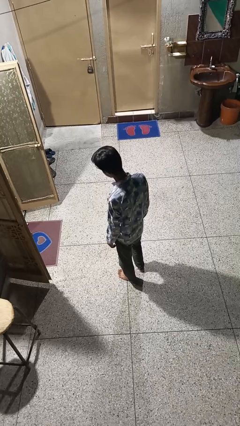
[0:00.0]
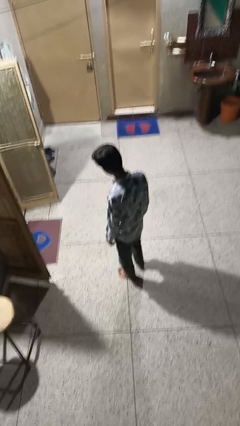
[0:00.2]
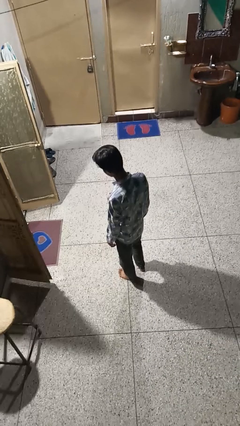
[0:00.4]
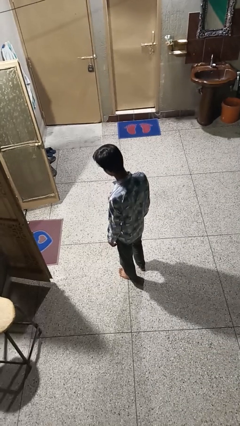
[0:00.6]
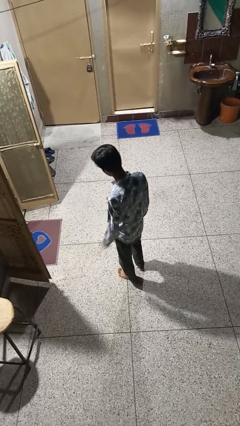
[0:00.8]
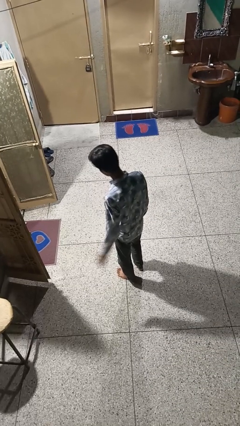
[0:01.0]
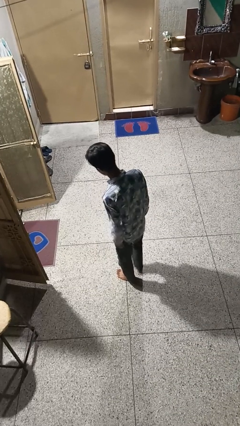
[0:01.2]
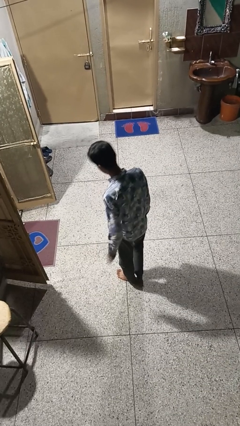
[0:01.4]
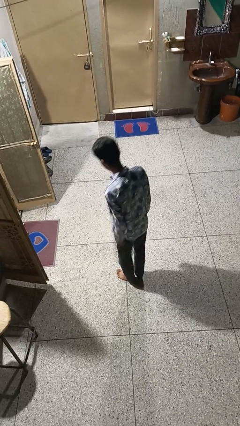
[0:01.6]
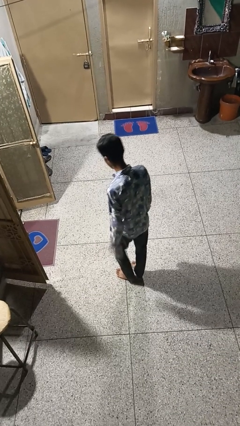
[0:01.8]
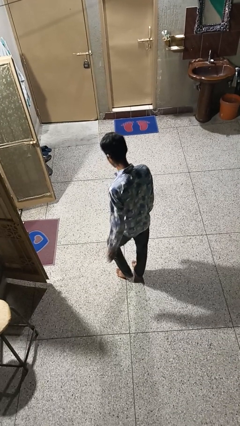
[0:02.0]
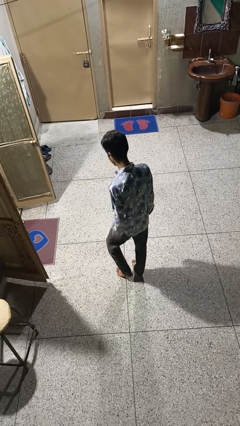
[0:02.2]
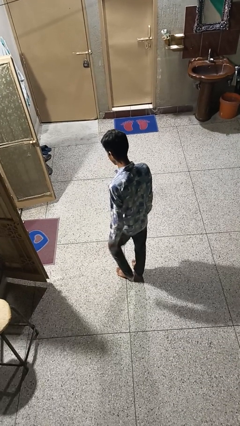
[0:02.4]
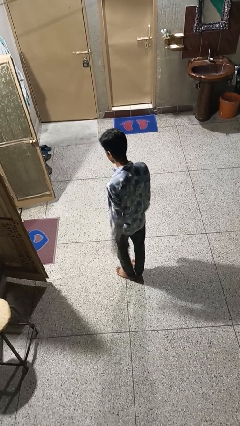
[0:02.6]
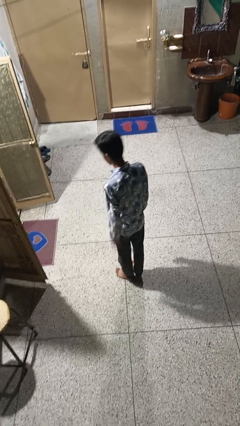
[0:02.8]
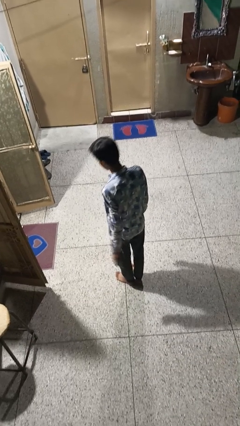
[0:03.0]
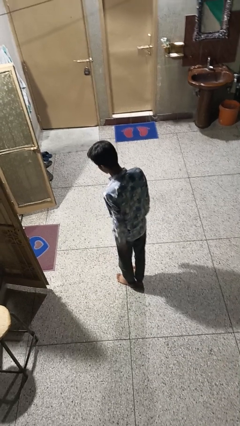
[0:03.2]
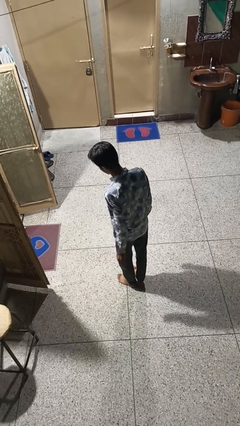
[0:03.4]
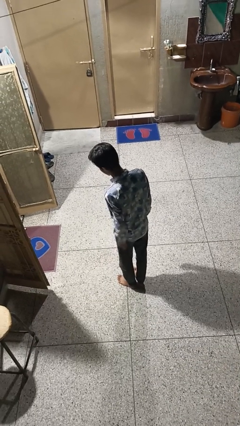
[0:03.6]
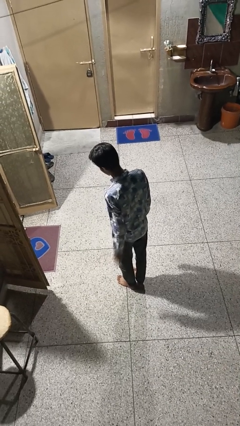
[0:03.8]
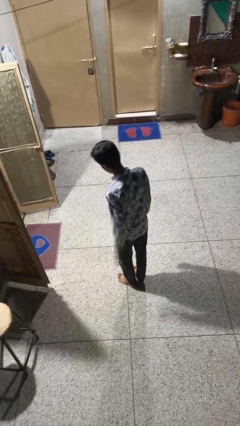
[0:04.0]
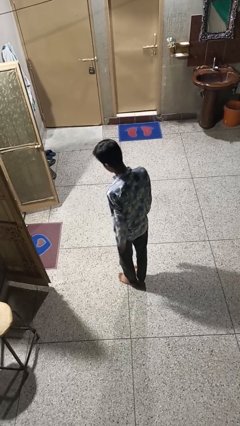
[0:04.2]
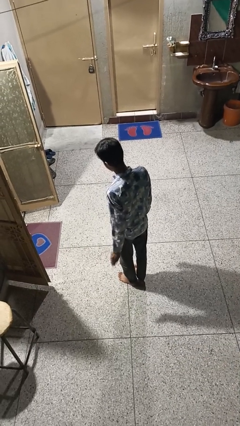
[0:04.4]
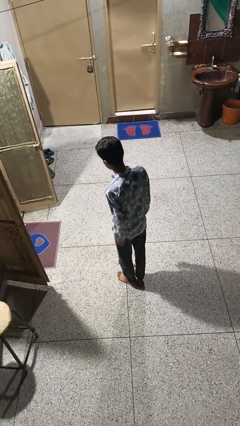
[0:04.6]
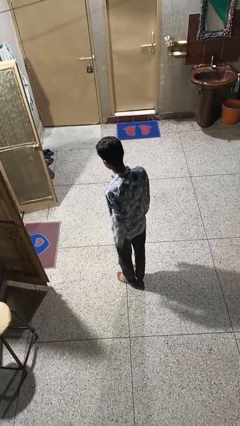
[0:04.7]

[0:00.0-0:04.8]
person slaps hands on thighs

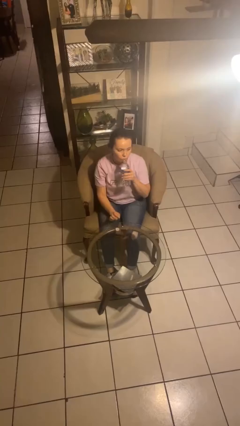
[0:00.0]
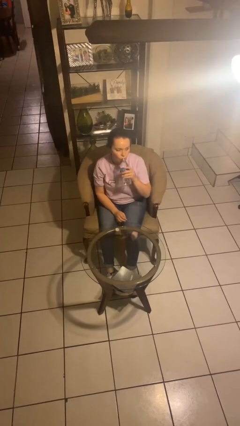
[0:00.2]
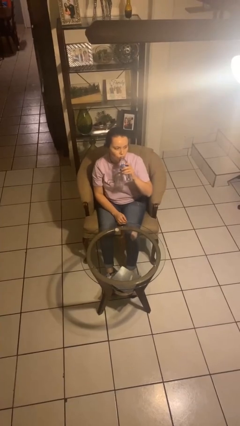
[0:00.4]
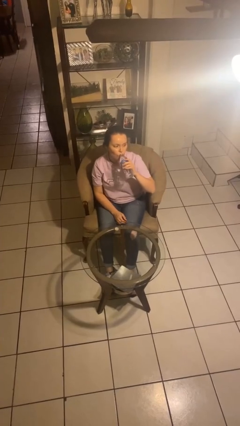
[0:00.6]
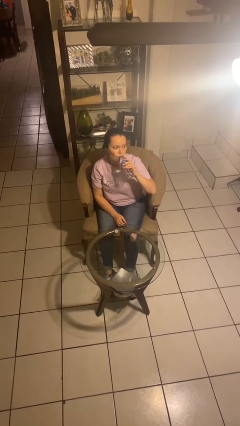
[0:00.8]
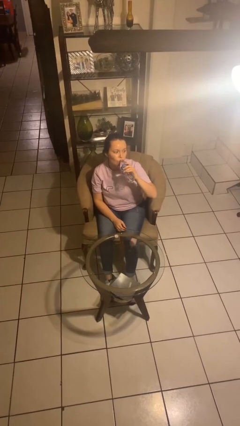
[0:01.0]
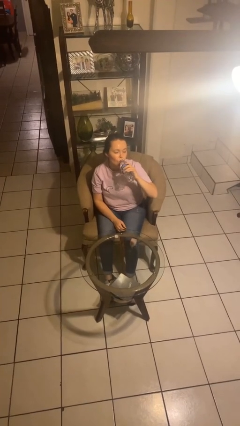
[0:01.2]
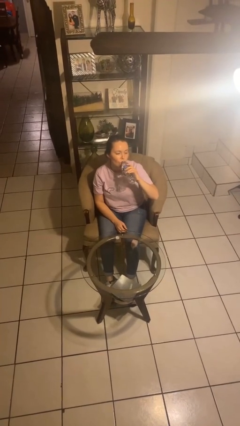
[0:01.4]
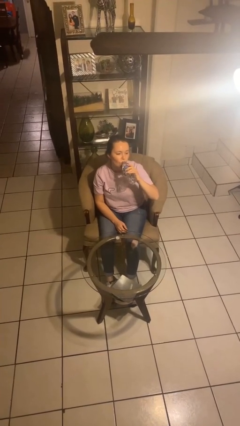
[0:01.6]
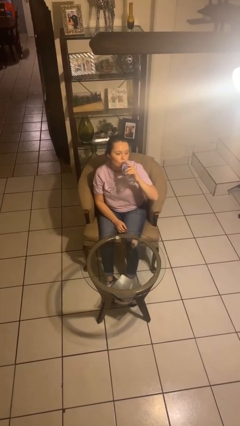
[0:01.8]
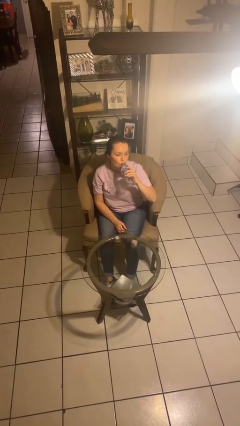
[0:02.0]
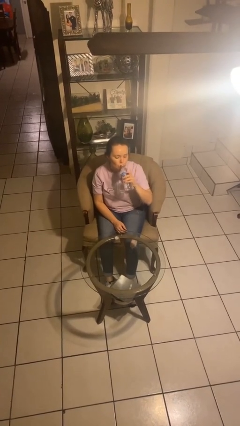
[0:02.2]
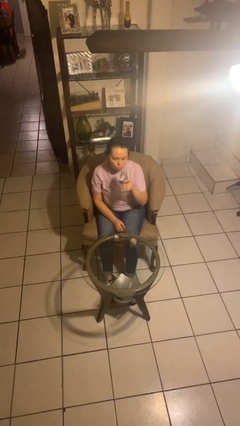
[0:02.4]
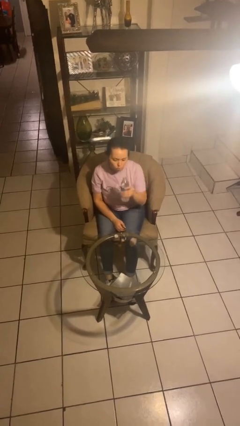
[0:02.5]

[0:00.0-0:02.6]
person drinks from bottle

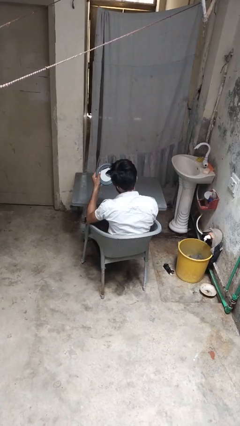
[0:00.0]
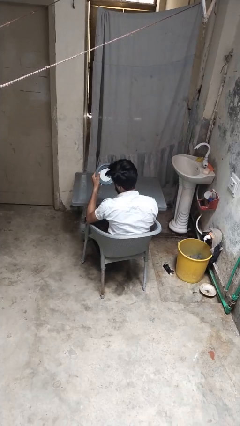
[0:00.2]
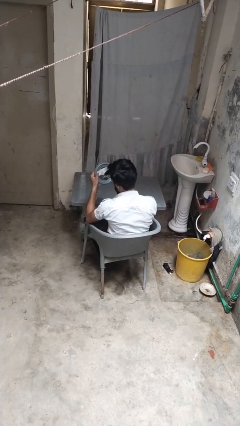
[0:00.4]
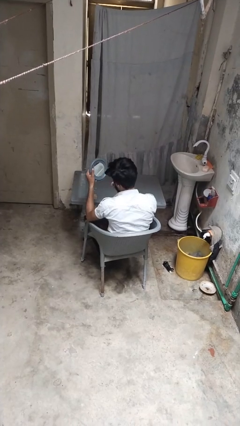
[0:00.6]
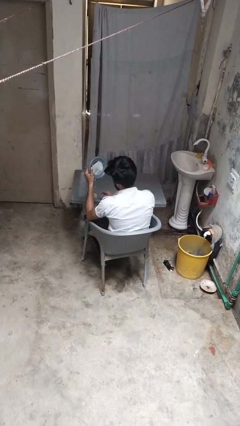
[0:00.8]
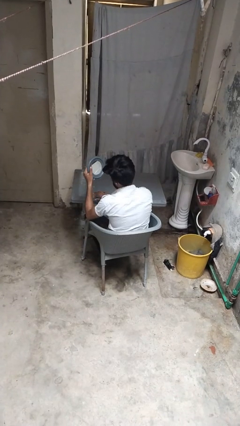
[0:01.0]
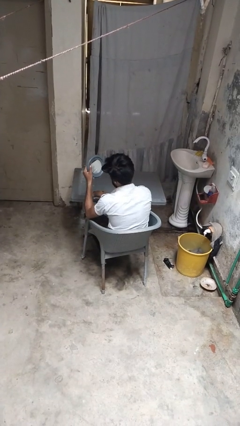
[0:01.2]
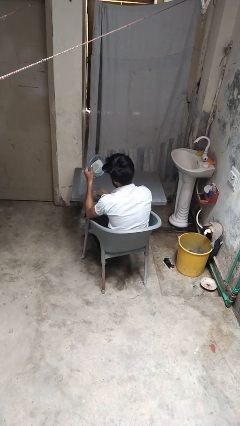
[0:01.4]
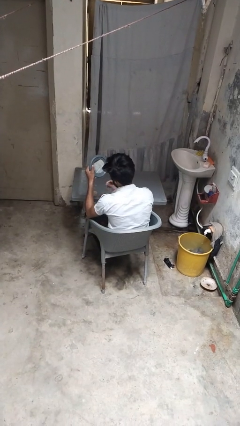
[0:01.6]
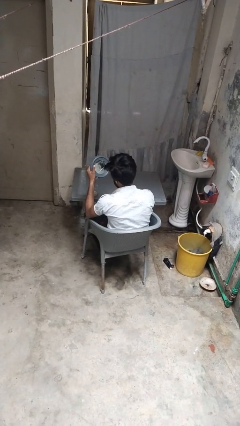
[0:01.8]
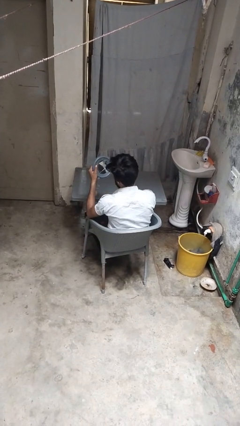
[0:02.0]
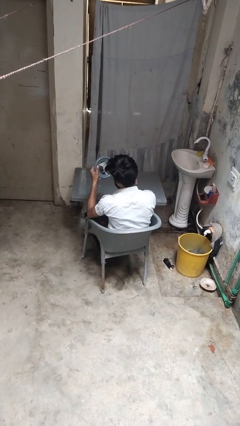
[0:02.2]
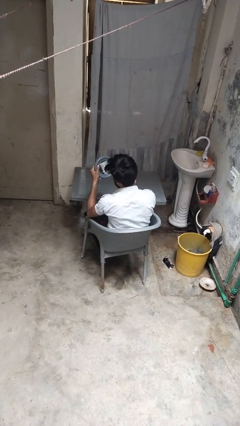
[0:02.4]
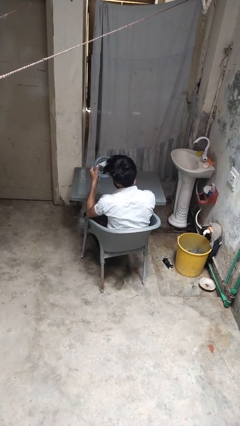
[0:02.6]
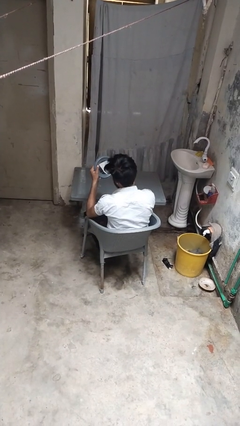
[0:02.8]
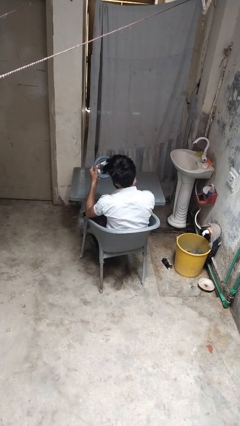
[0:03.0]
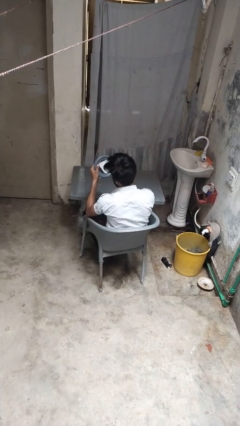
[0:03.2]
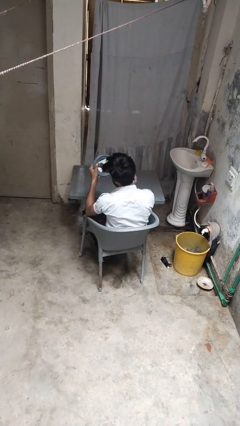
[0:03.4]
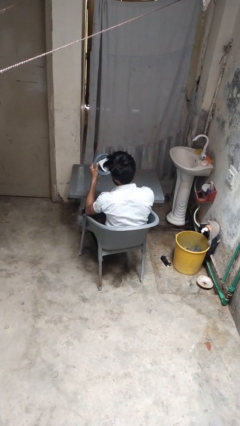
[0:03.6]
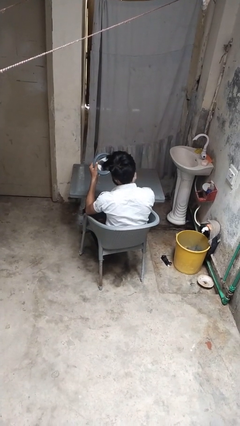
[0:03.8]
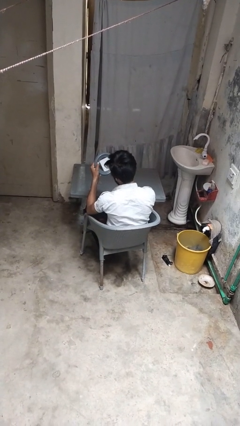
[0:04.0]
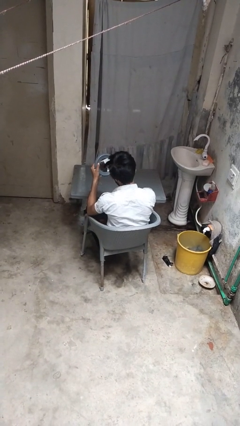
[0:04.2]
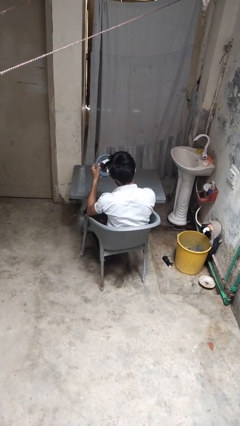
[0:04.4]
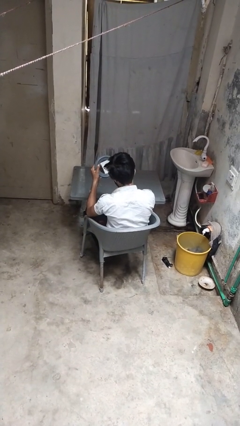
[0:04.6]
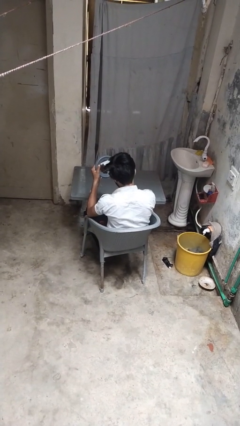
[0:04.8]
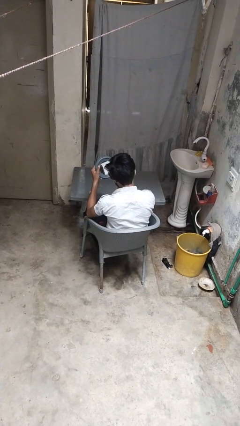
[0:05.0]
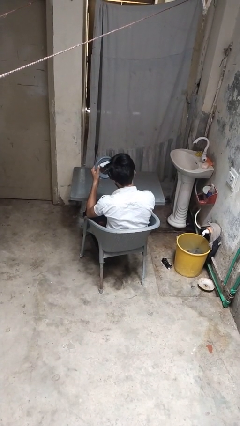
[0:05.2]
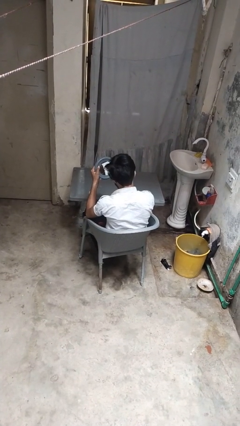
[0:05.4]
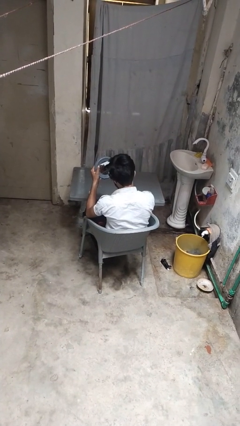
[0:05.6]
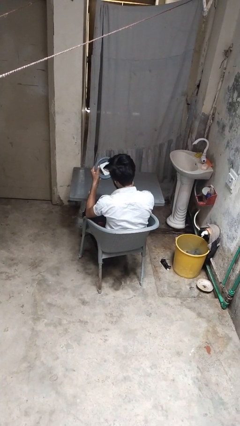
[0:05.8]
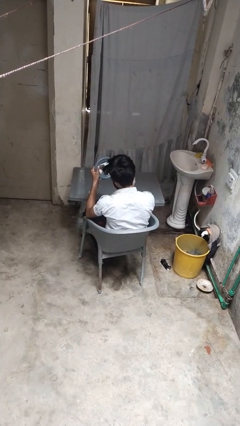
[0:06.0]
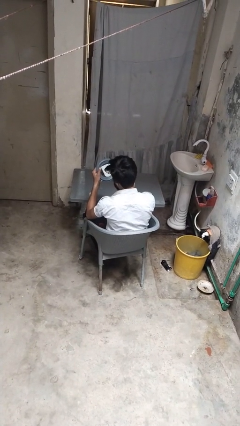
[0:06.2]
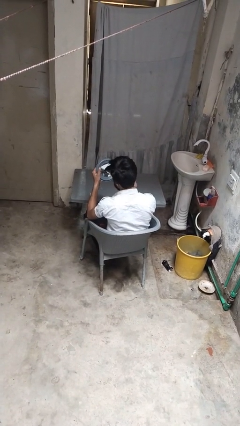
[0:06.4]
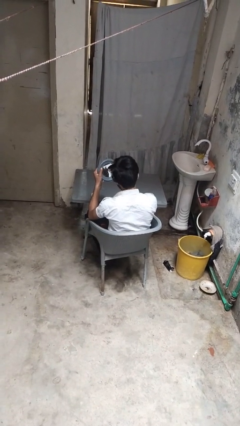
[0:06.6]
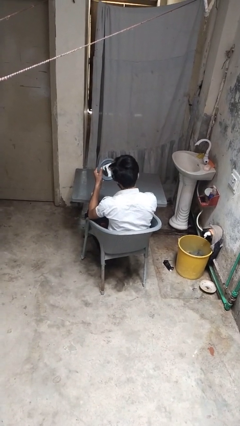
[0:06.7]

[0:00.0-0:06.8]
person applies foundation makeup

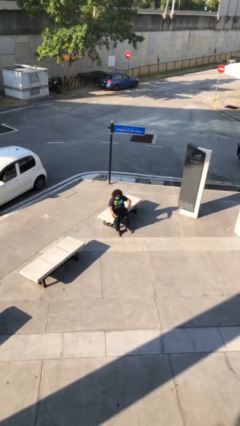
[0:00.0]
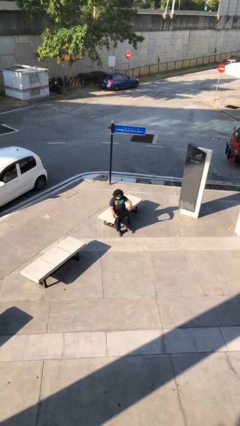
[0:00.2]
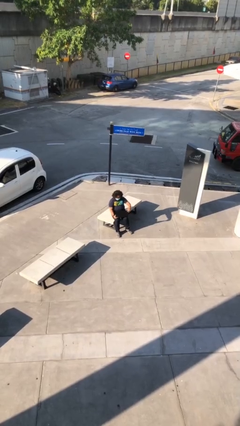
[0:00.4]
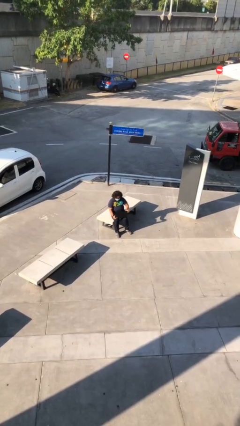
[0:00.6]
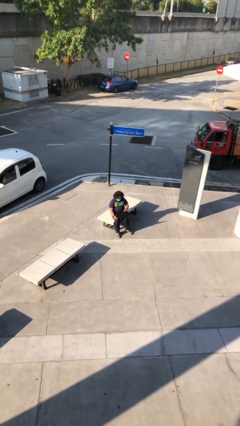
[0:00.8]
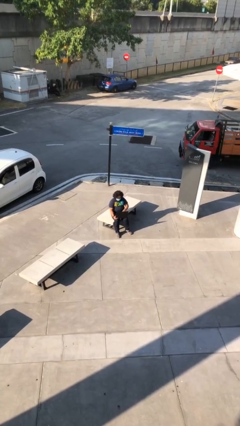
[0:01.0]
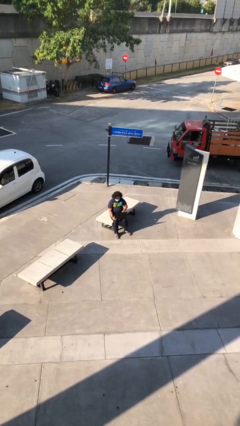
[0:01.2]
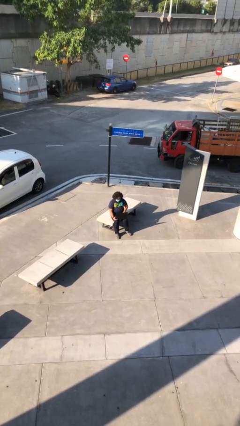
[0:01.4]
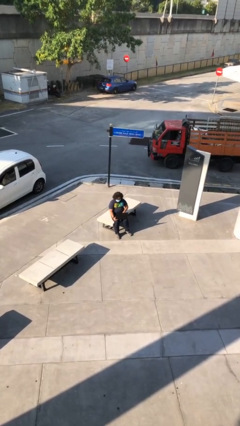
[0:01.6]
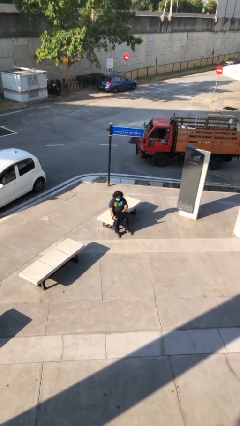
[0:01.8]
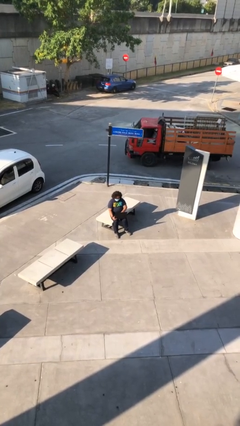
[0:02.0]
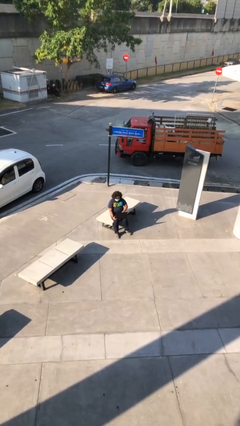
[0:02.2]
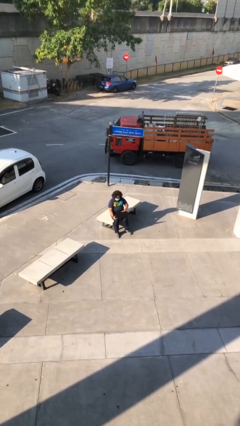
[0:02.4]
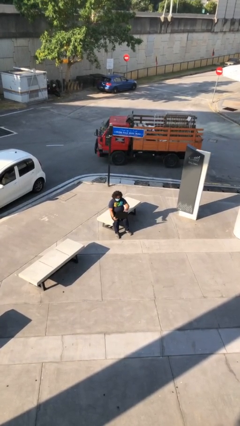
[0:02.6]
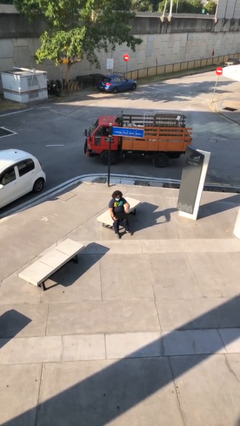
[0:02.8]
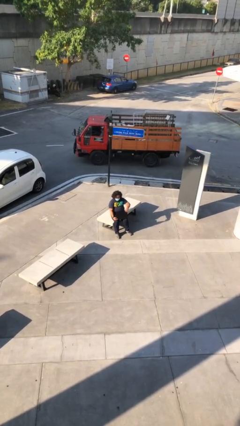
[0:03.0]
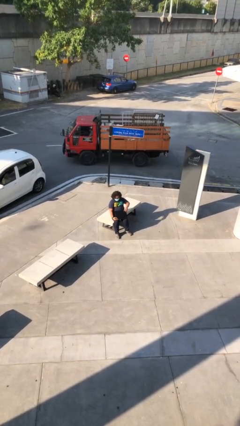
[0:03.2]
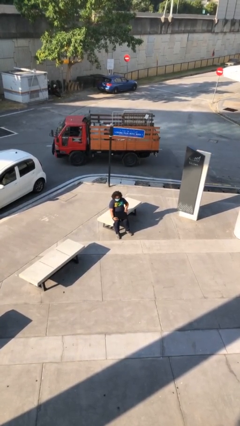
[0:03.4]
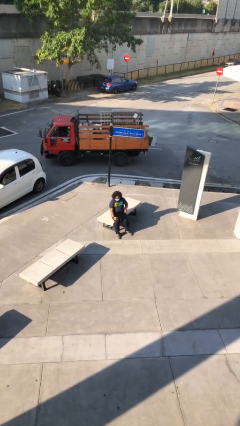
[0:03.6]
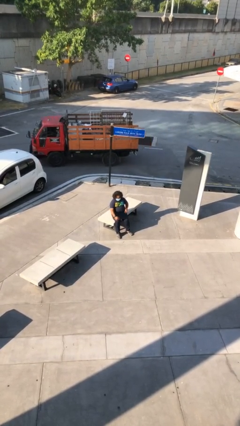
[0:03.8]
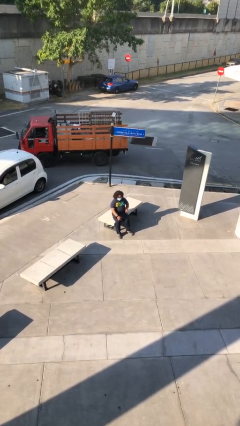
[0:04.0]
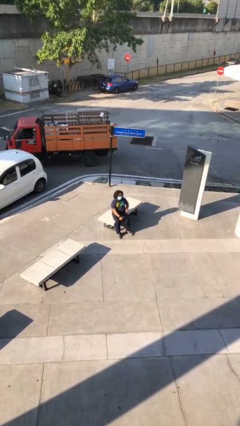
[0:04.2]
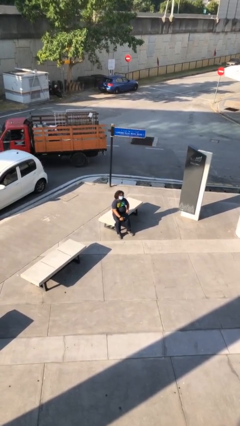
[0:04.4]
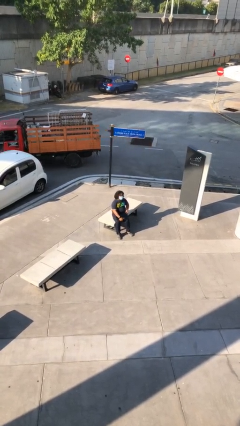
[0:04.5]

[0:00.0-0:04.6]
person interacts with laptop
